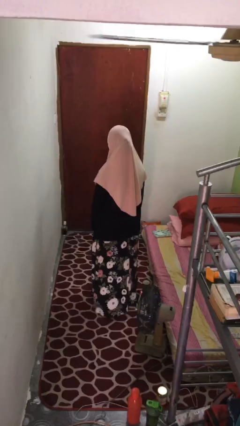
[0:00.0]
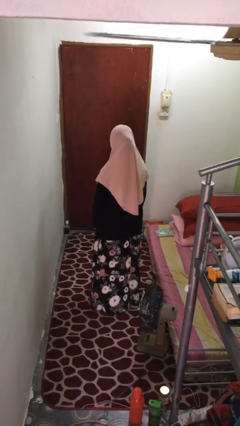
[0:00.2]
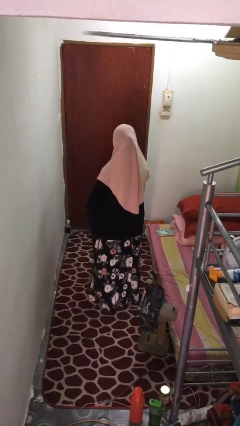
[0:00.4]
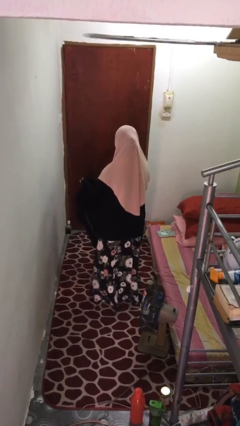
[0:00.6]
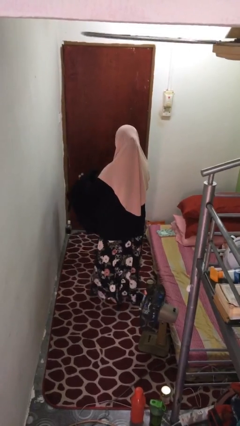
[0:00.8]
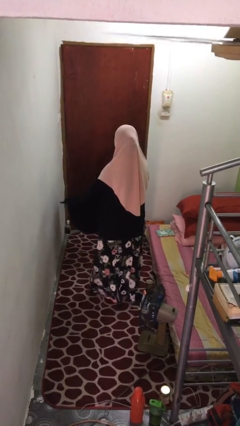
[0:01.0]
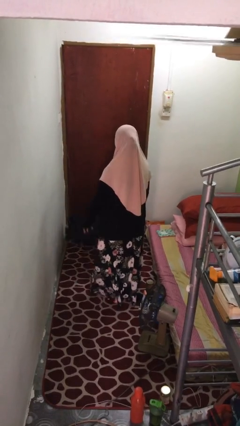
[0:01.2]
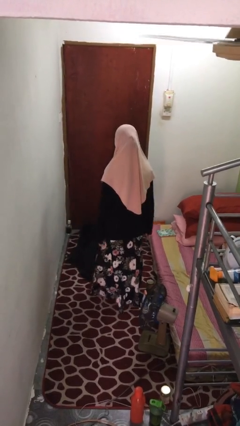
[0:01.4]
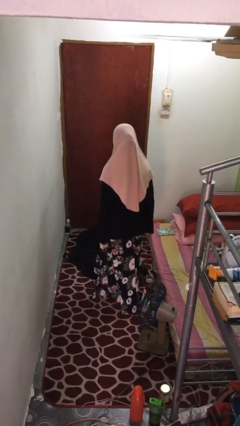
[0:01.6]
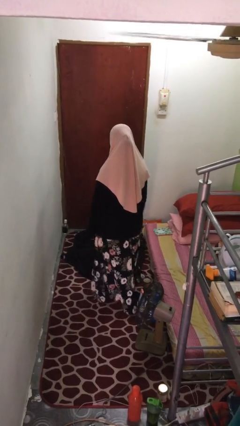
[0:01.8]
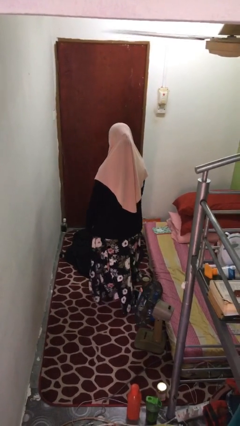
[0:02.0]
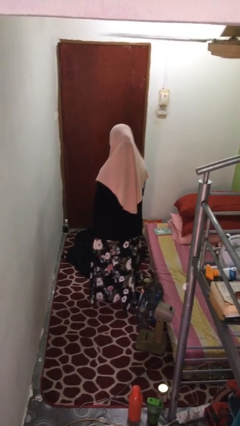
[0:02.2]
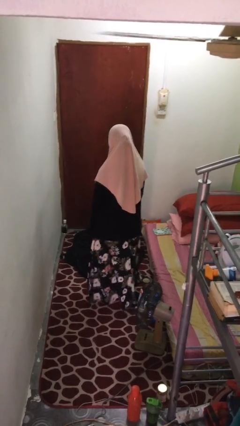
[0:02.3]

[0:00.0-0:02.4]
person throws object to ground

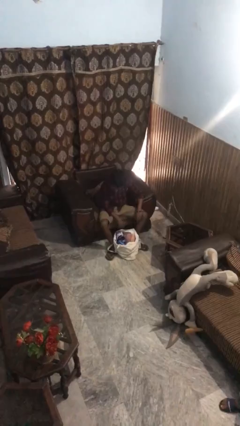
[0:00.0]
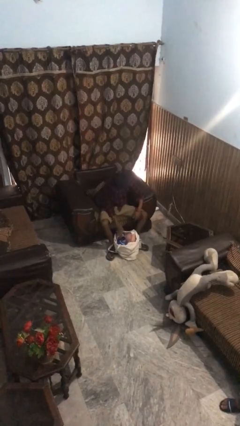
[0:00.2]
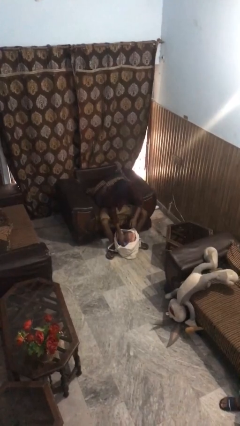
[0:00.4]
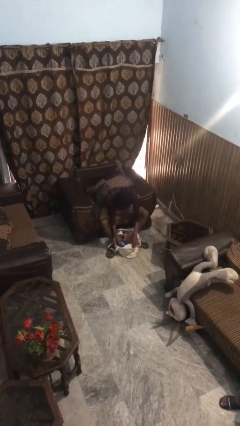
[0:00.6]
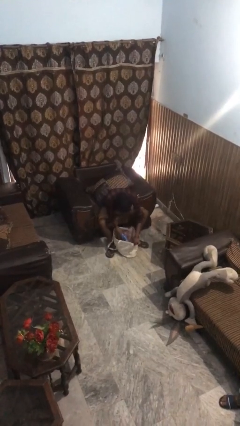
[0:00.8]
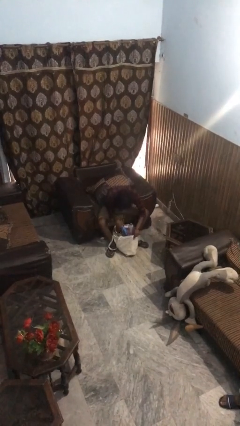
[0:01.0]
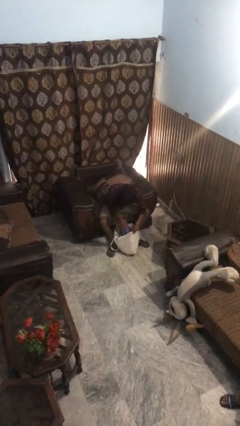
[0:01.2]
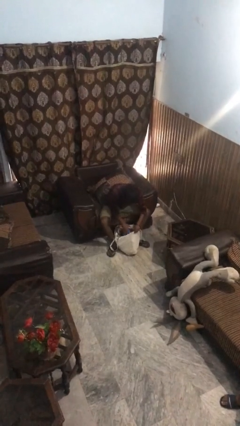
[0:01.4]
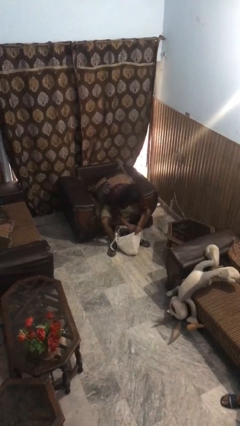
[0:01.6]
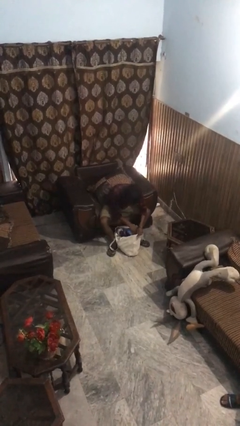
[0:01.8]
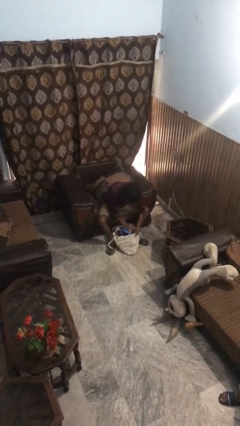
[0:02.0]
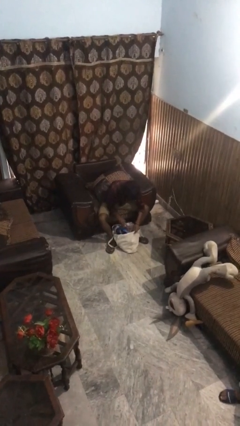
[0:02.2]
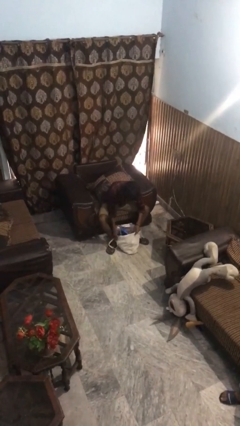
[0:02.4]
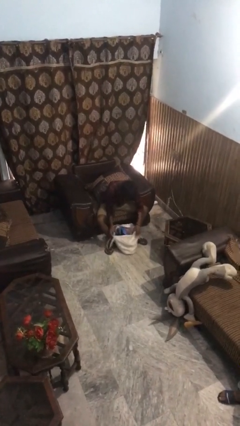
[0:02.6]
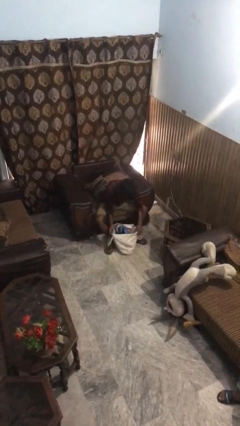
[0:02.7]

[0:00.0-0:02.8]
person searches in bag

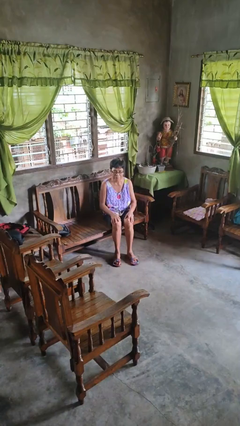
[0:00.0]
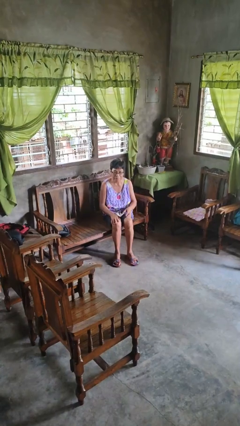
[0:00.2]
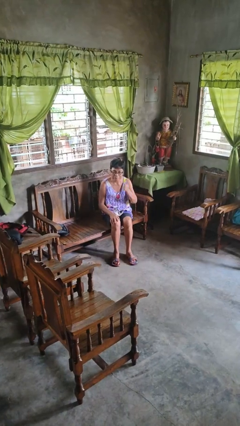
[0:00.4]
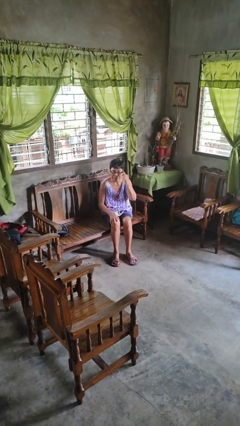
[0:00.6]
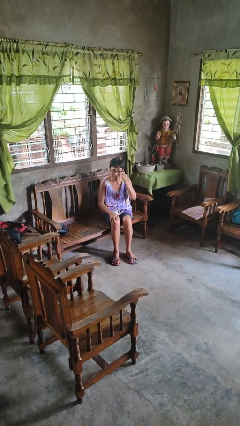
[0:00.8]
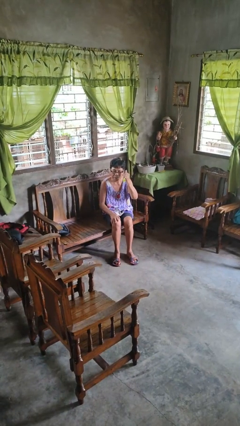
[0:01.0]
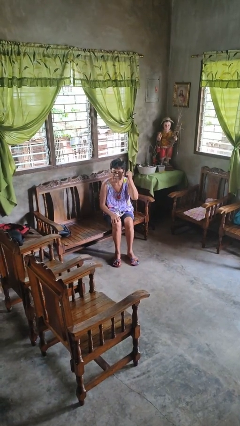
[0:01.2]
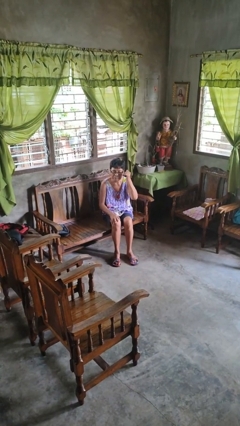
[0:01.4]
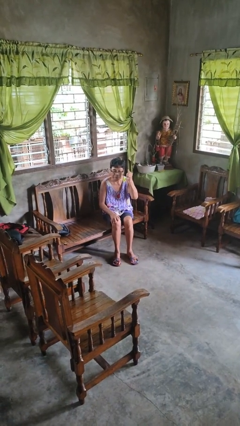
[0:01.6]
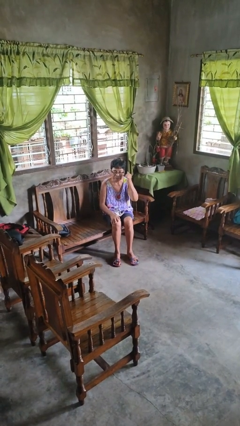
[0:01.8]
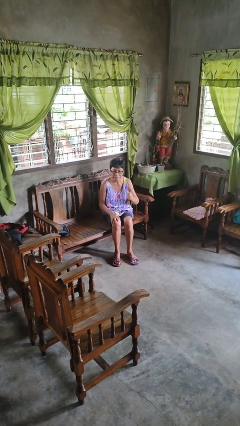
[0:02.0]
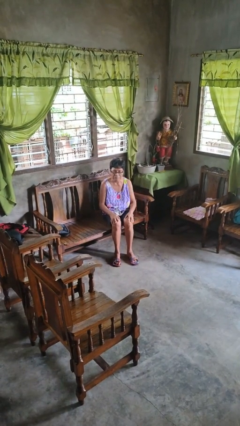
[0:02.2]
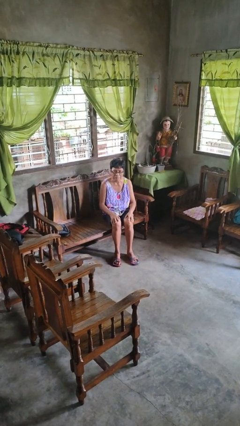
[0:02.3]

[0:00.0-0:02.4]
person gestures behind me

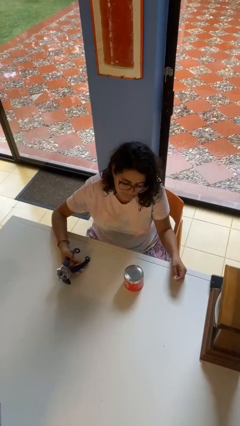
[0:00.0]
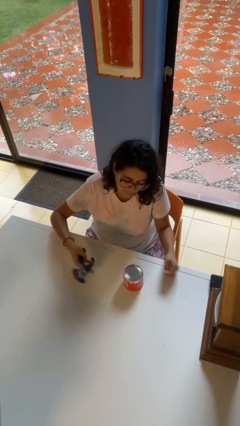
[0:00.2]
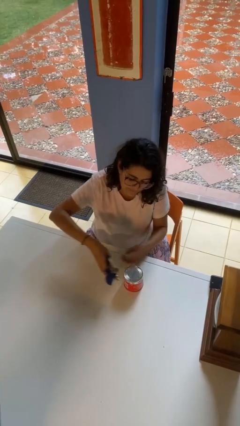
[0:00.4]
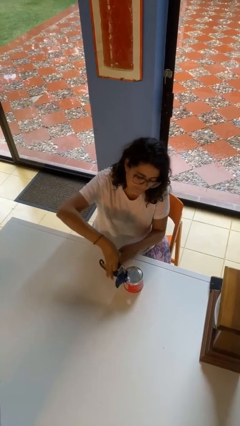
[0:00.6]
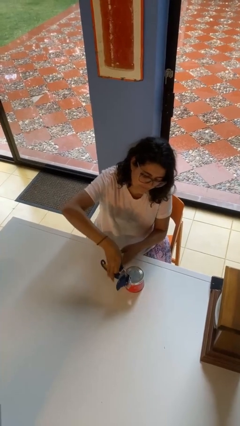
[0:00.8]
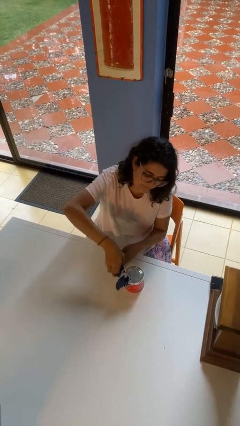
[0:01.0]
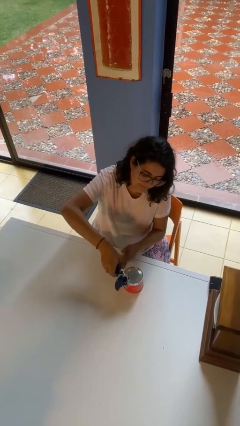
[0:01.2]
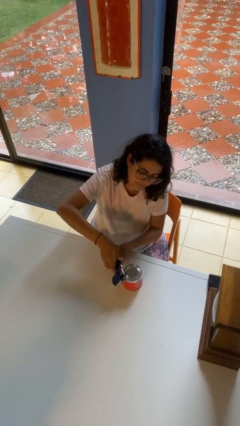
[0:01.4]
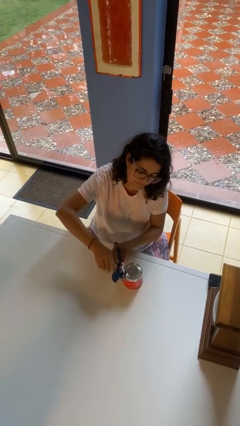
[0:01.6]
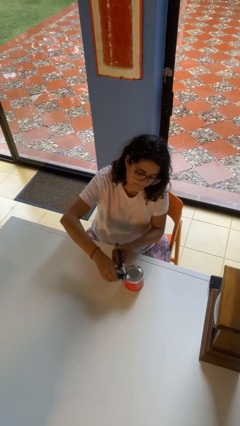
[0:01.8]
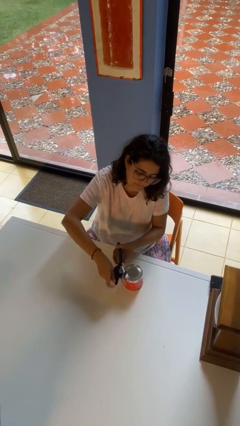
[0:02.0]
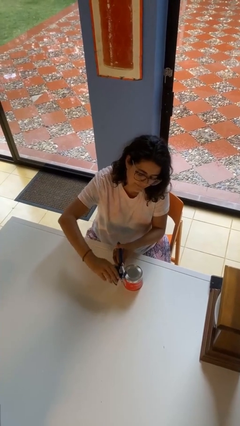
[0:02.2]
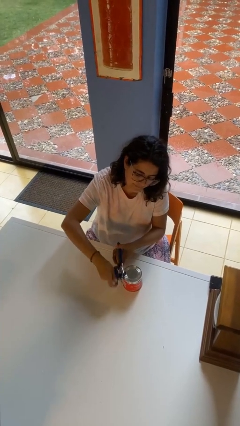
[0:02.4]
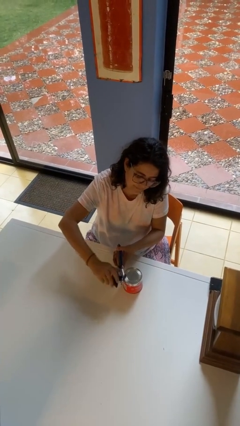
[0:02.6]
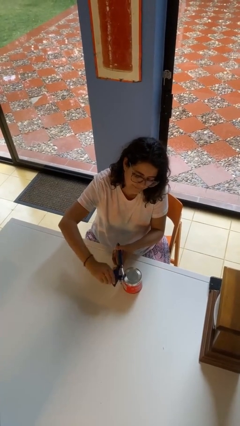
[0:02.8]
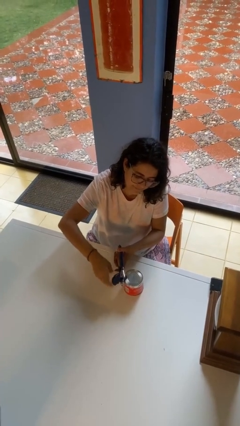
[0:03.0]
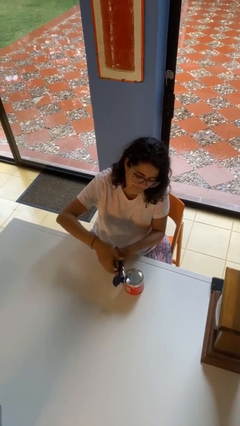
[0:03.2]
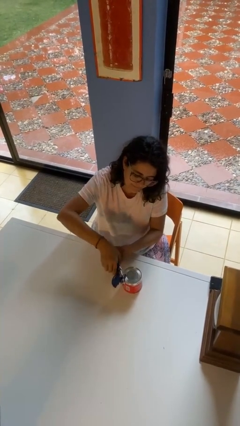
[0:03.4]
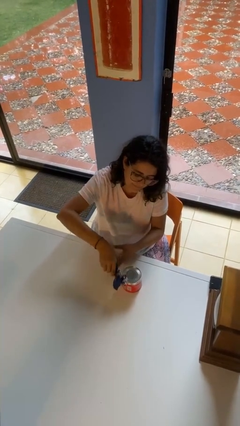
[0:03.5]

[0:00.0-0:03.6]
person opens can with can opener

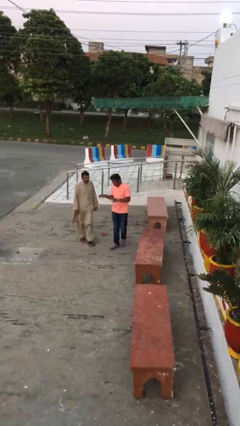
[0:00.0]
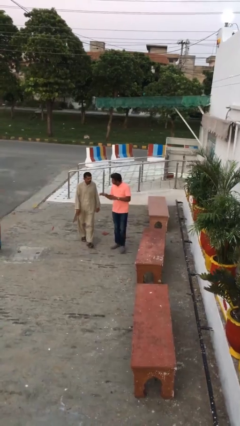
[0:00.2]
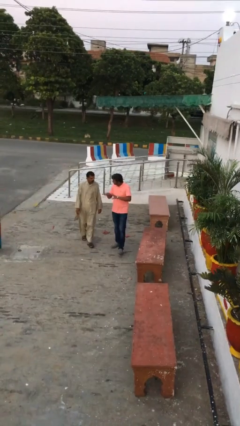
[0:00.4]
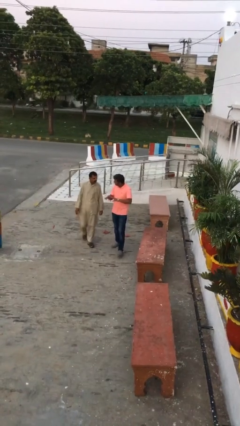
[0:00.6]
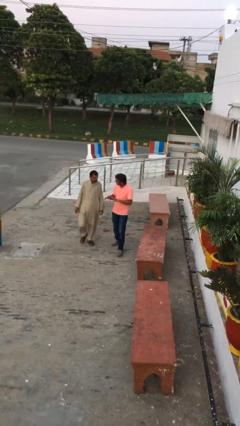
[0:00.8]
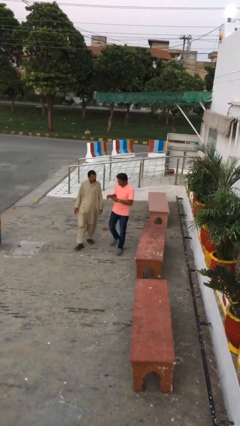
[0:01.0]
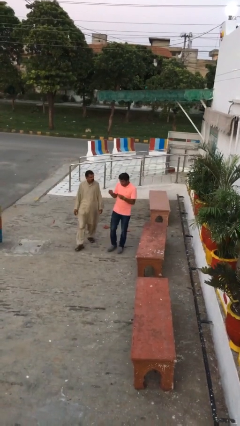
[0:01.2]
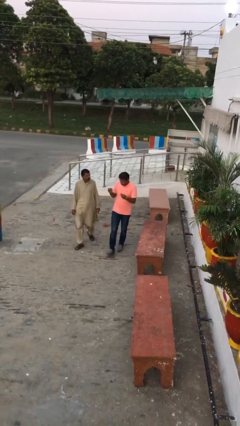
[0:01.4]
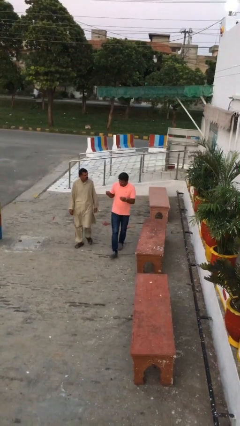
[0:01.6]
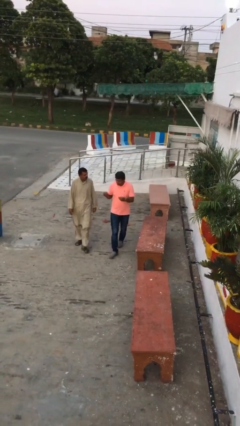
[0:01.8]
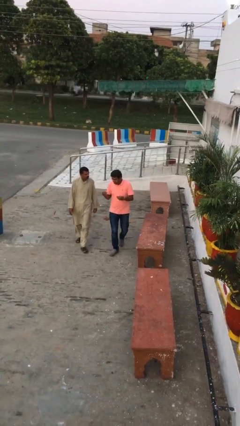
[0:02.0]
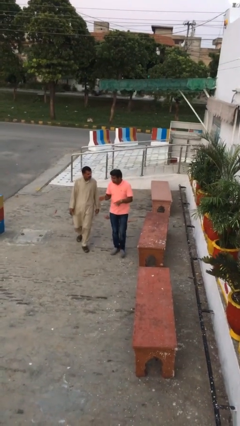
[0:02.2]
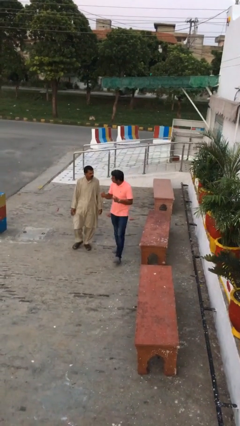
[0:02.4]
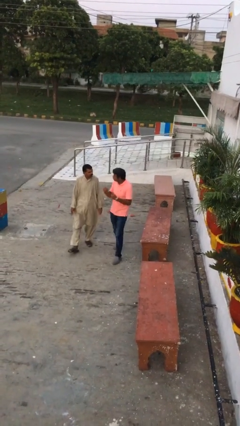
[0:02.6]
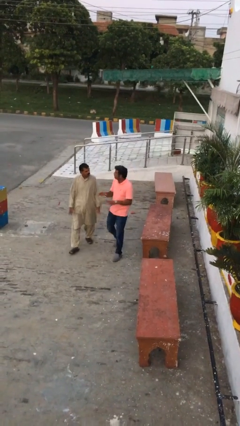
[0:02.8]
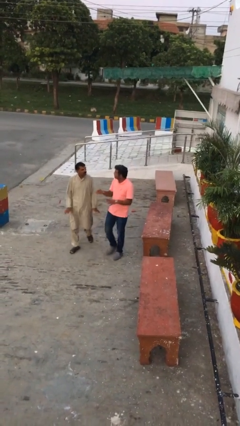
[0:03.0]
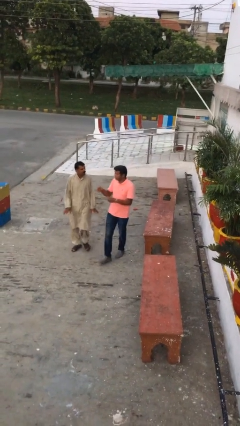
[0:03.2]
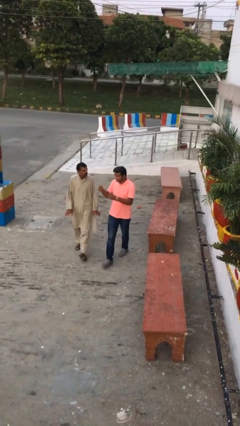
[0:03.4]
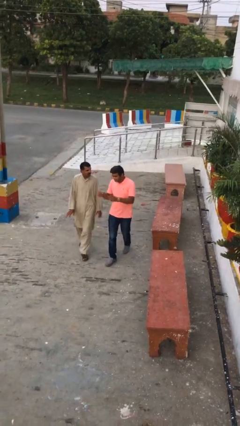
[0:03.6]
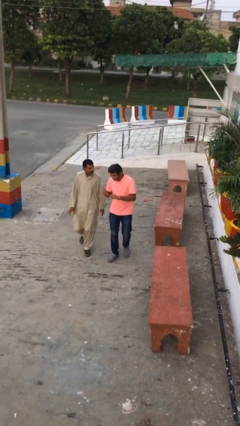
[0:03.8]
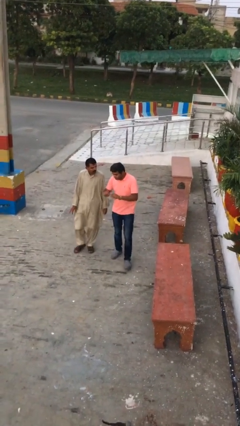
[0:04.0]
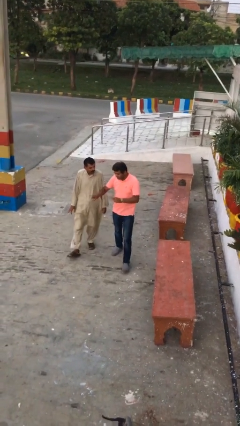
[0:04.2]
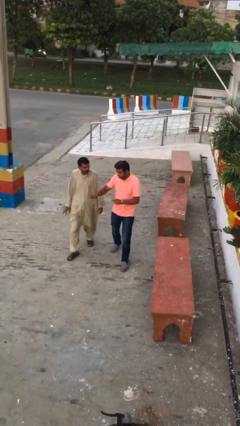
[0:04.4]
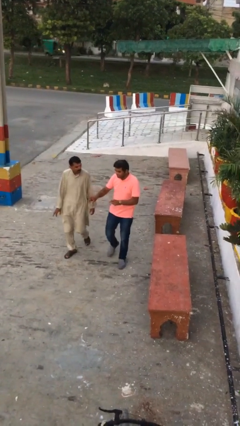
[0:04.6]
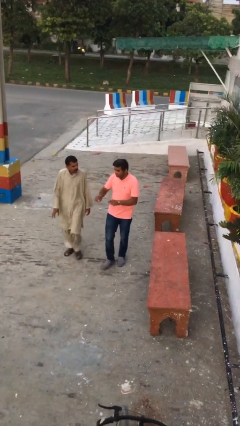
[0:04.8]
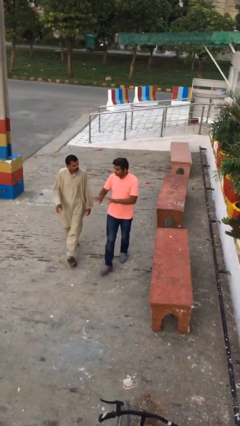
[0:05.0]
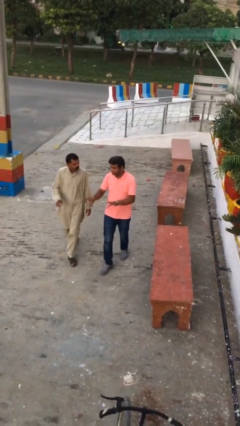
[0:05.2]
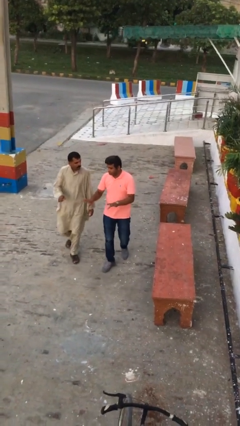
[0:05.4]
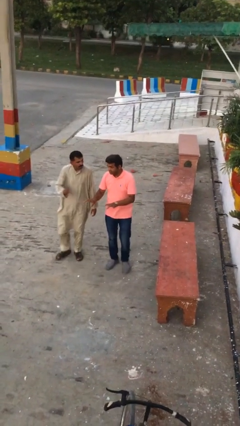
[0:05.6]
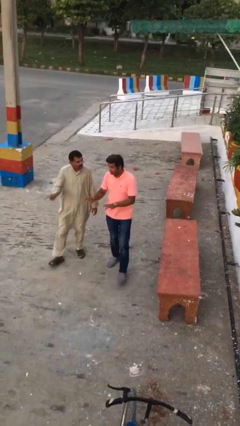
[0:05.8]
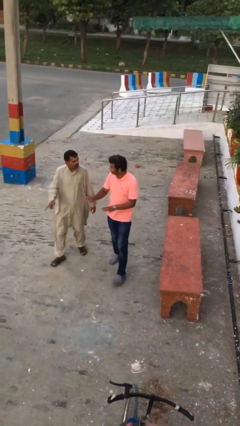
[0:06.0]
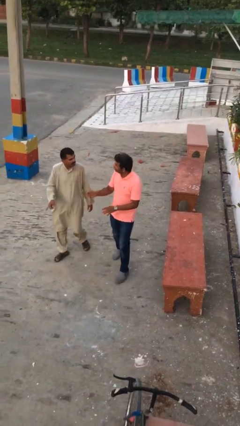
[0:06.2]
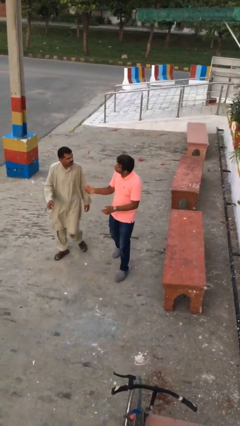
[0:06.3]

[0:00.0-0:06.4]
person talks to person
